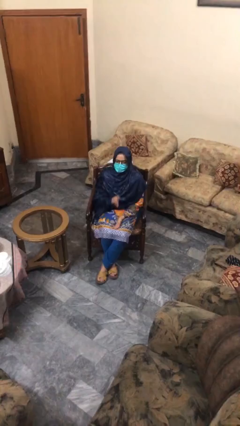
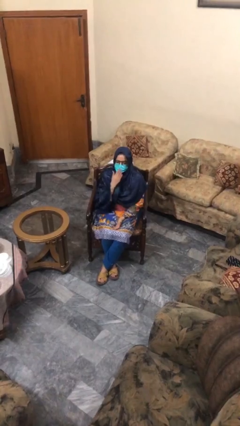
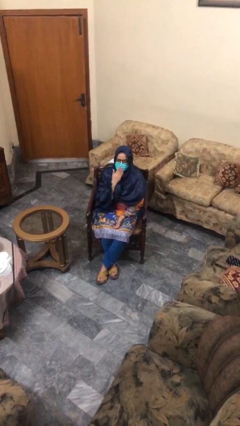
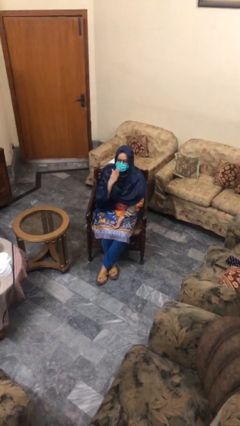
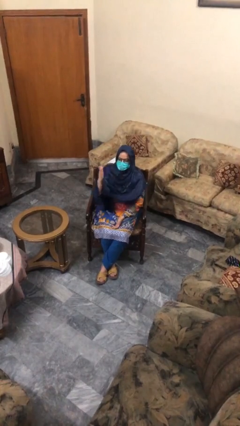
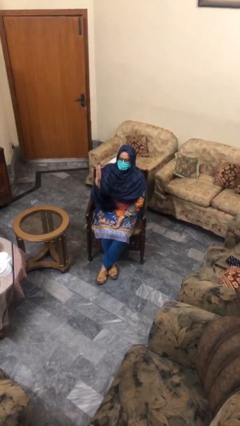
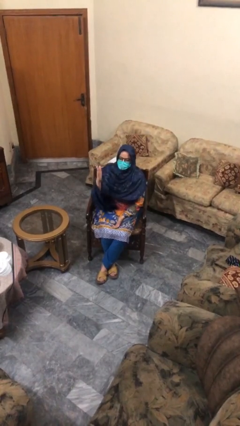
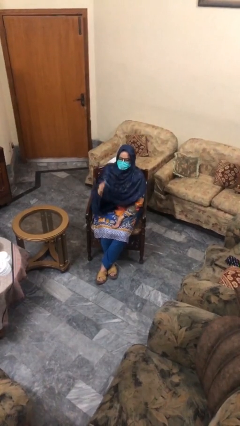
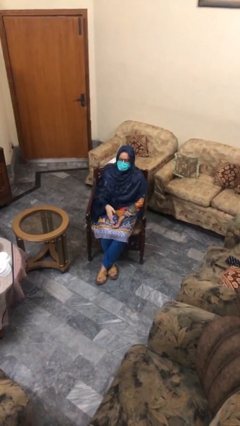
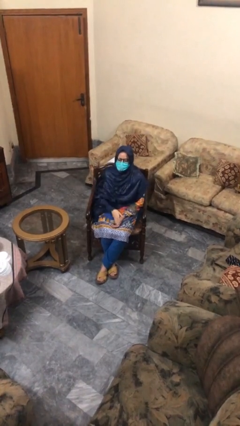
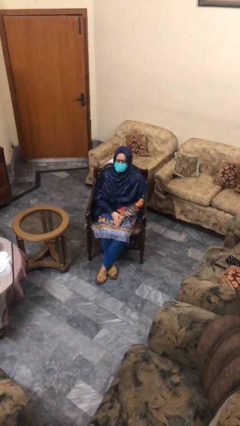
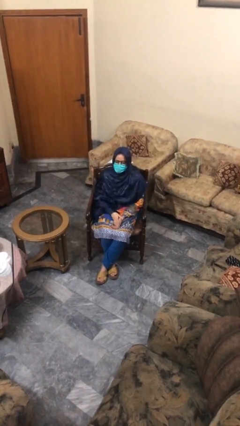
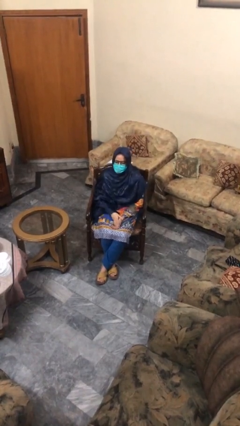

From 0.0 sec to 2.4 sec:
person gestures blow kiss

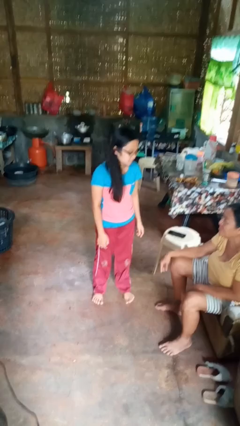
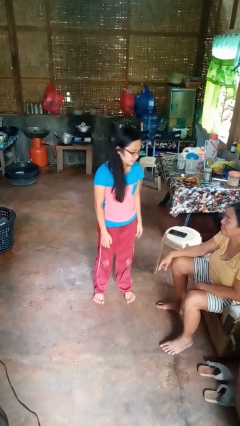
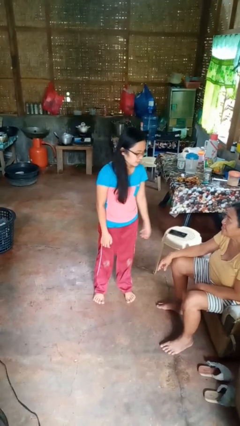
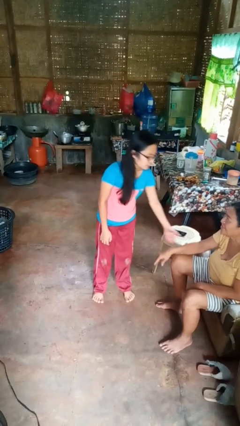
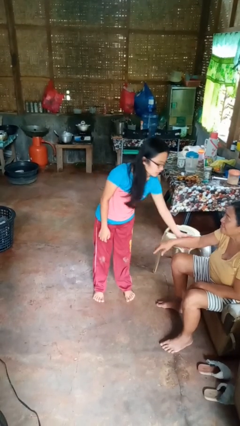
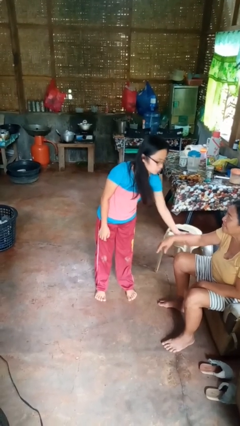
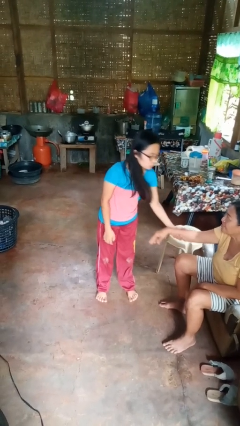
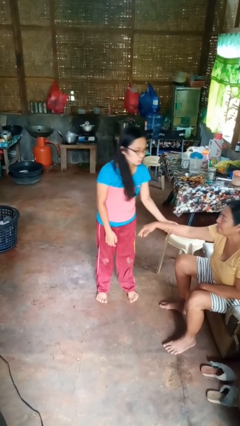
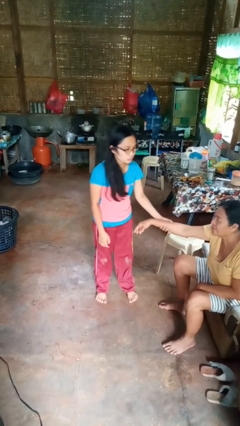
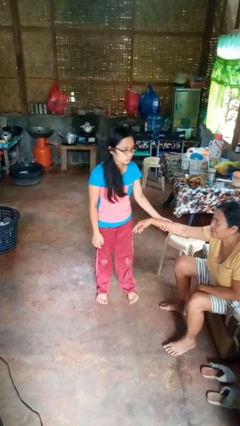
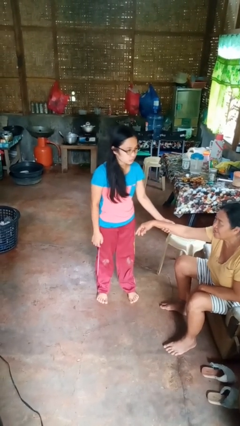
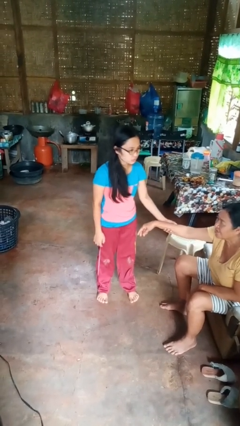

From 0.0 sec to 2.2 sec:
person grabs person by forearm

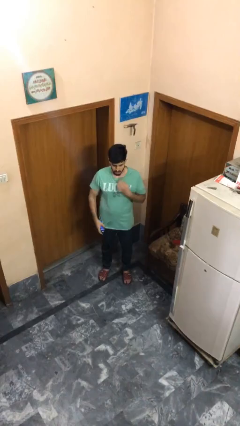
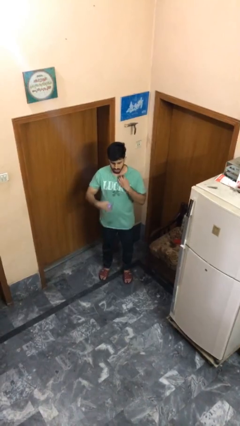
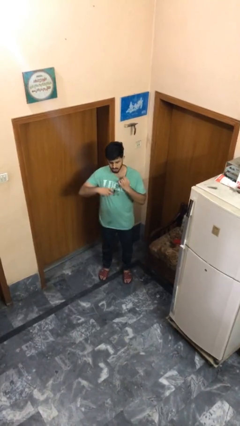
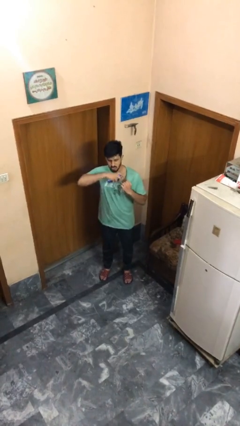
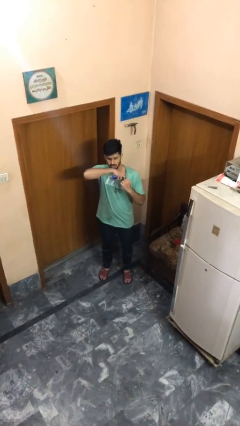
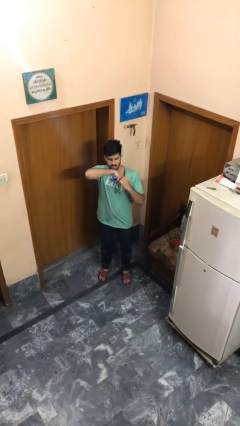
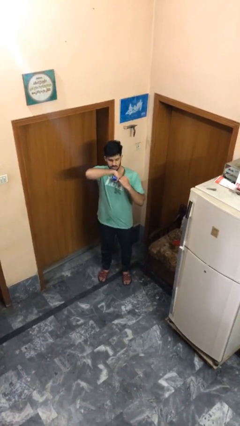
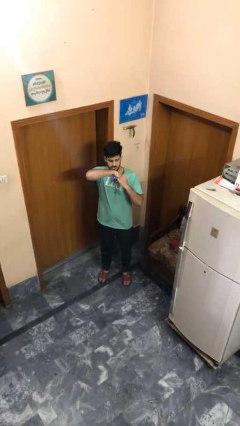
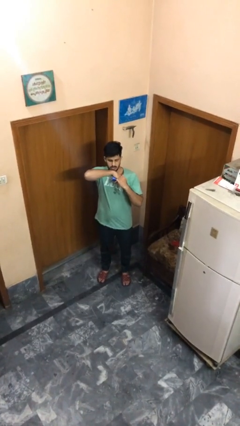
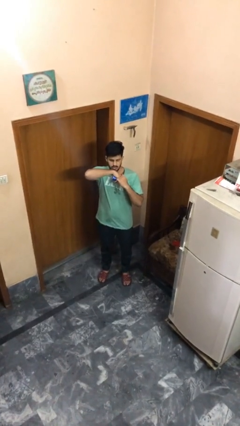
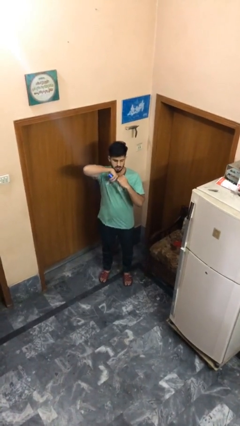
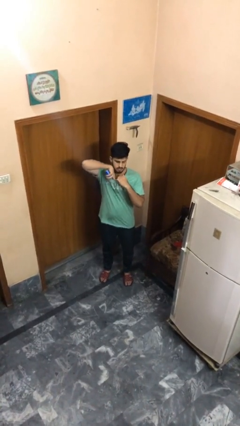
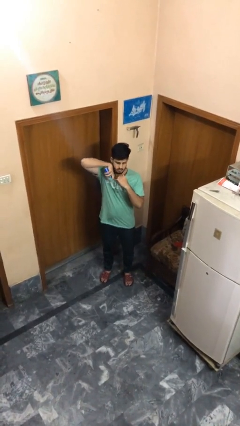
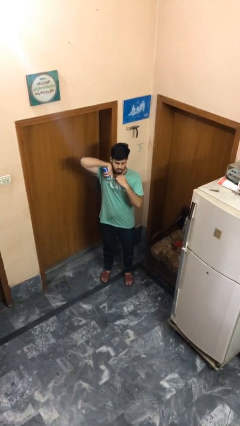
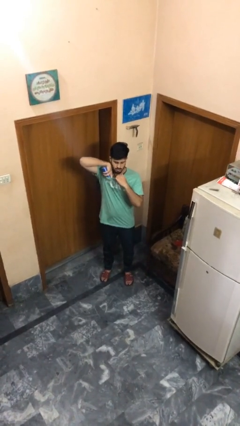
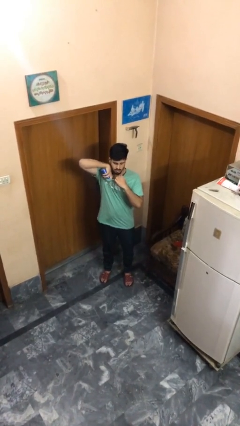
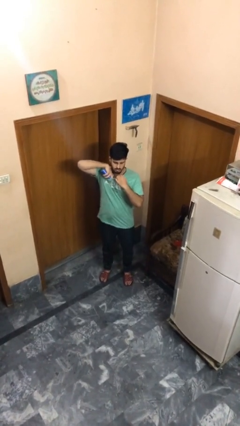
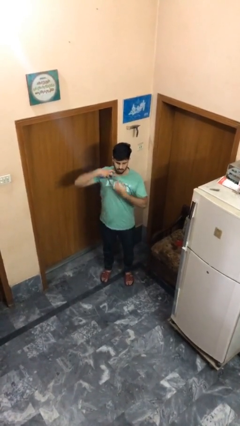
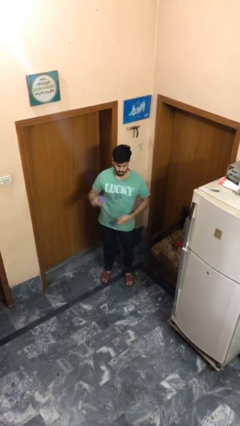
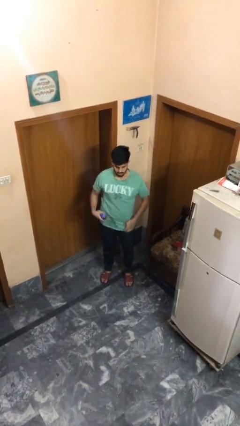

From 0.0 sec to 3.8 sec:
person applies deodorant

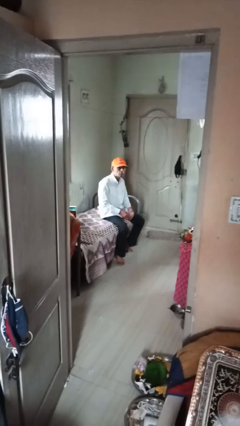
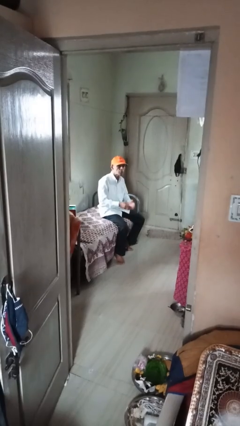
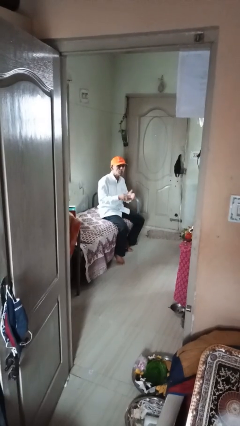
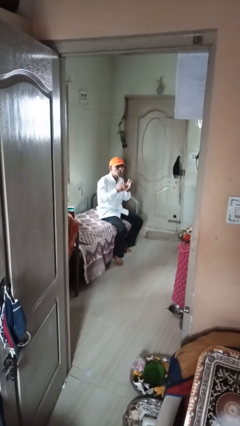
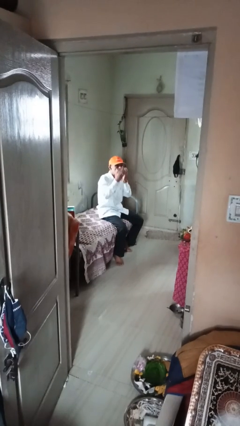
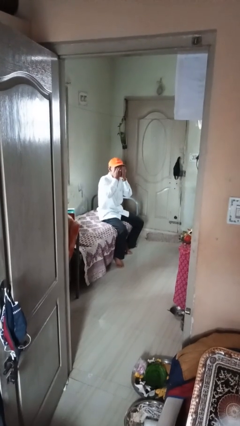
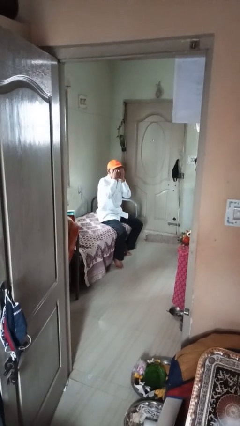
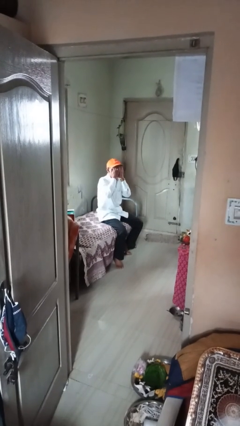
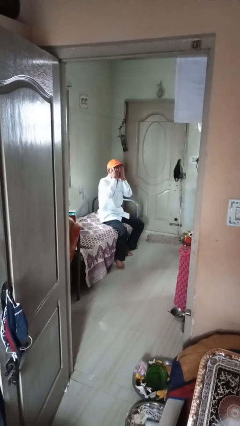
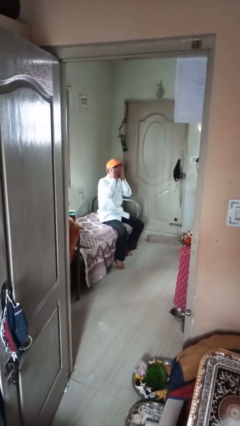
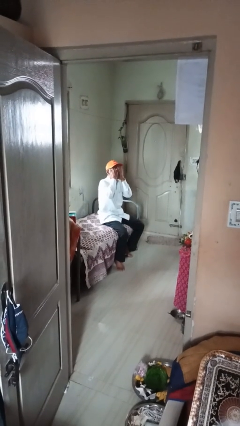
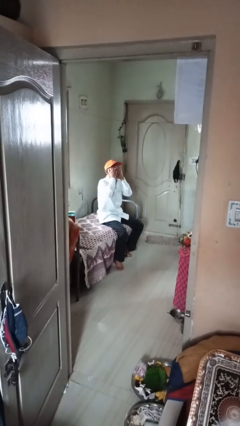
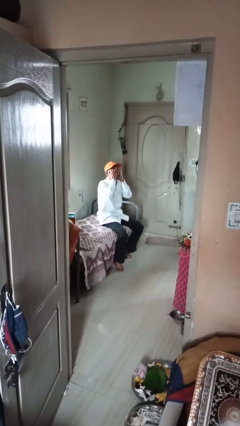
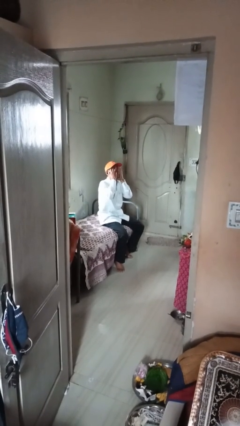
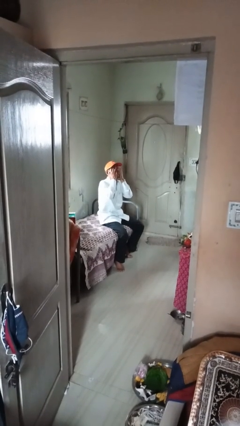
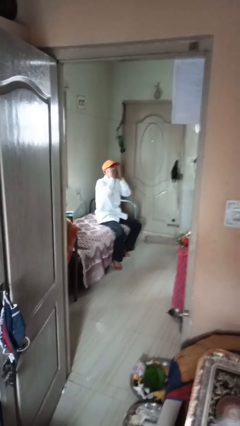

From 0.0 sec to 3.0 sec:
person covers face with hands

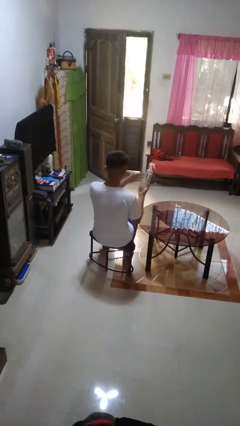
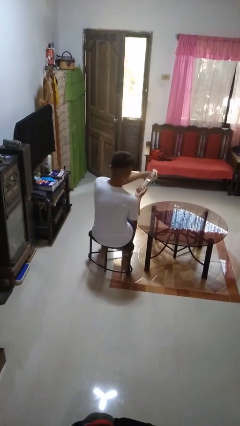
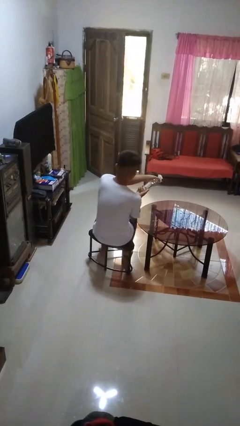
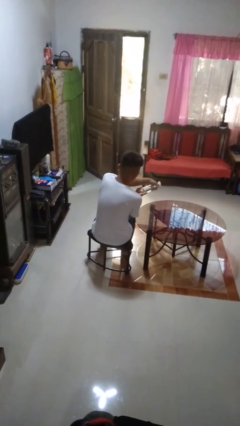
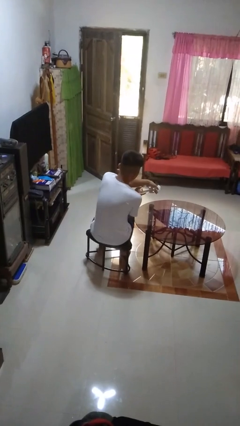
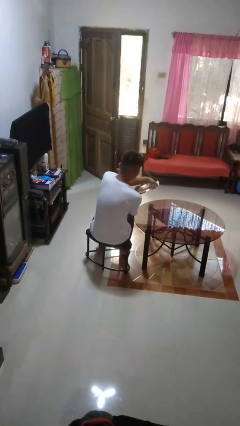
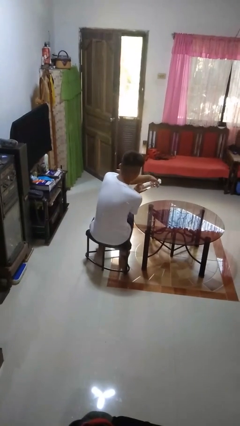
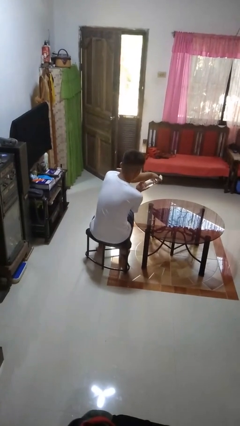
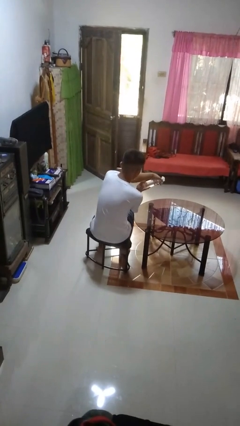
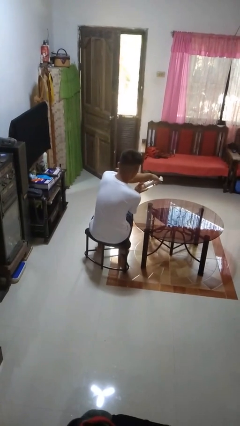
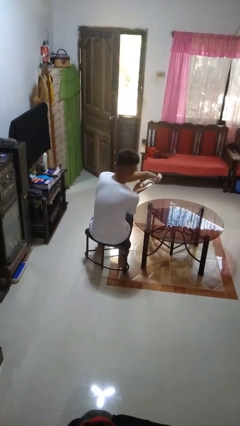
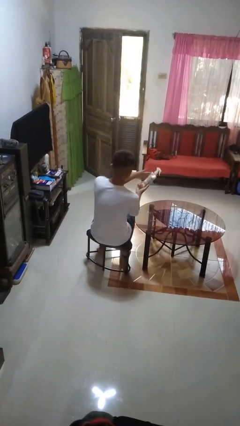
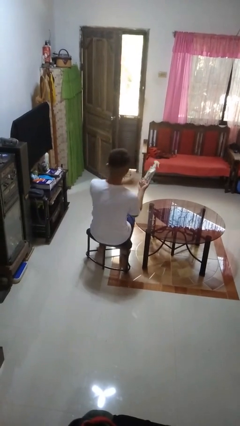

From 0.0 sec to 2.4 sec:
person sprays from bottle

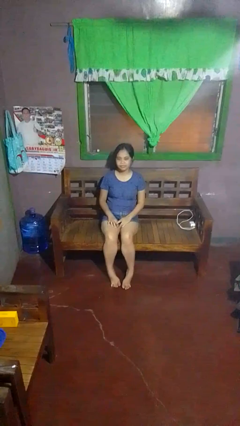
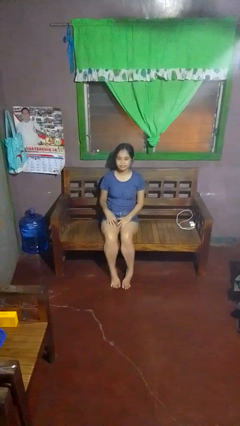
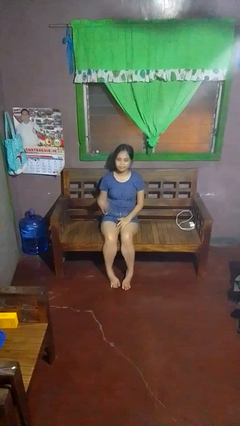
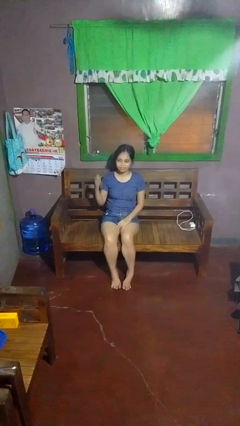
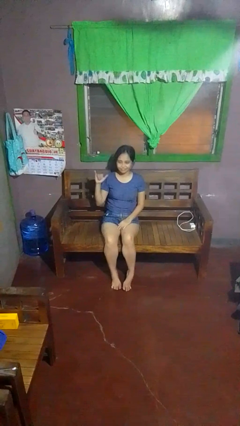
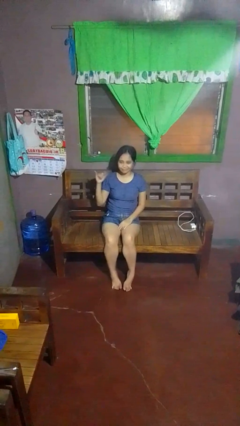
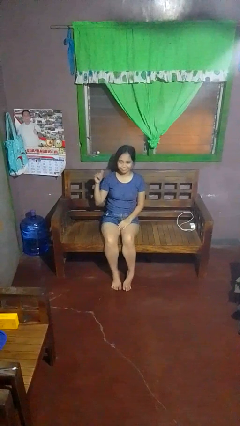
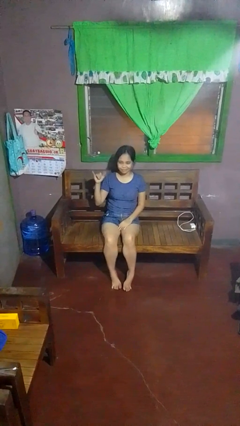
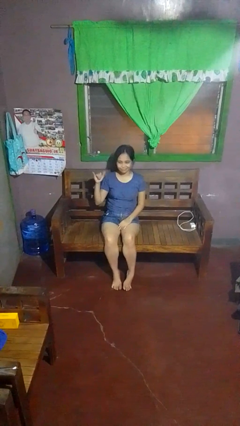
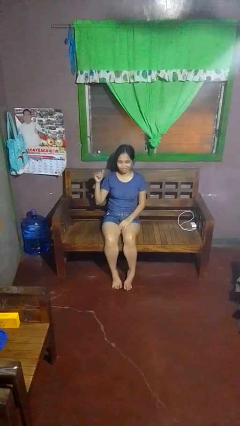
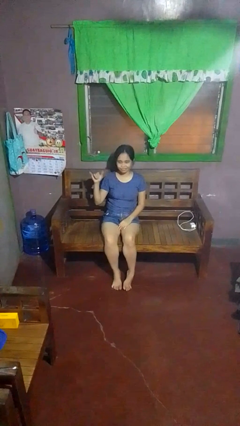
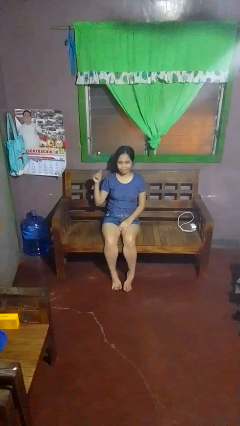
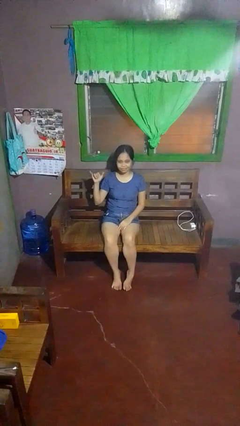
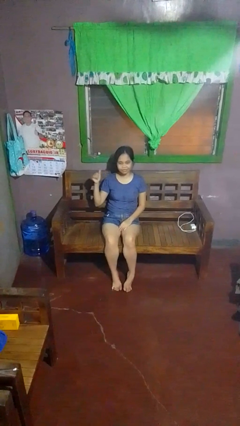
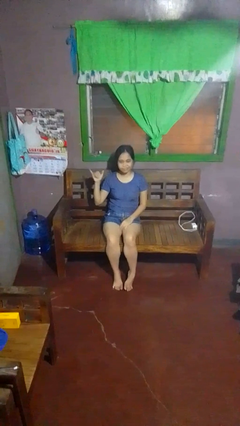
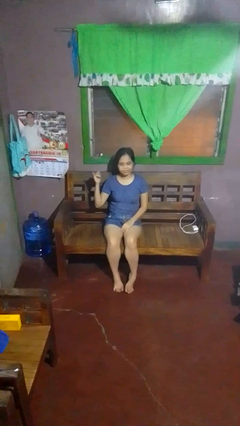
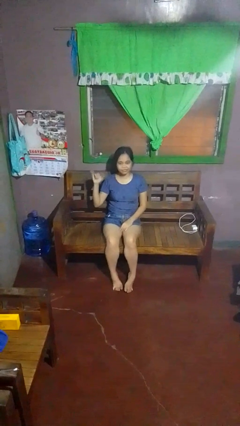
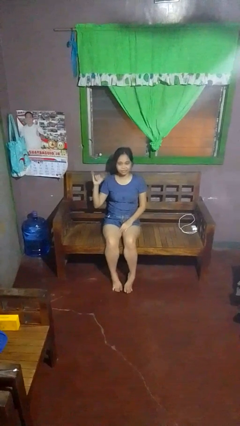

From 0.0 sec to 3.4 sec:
person gestures hang loose
